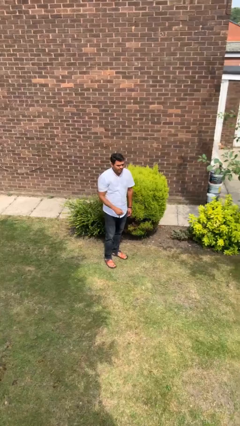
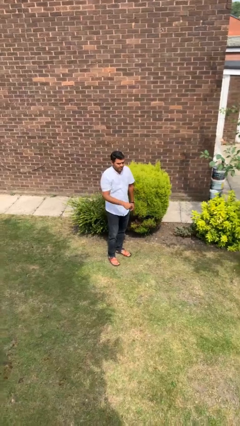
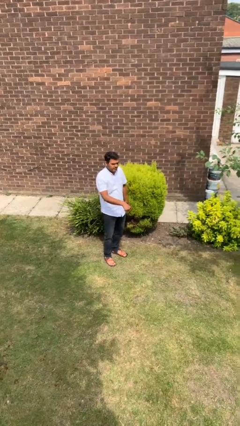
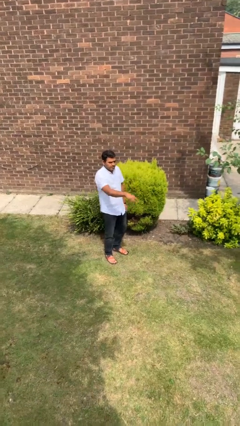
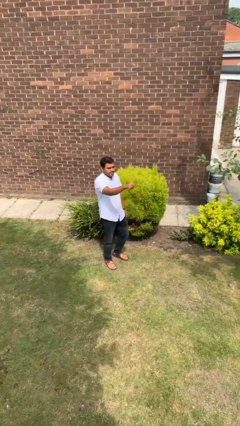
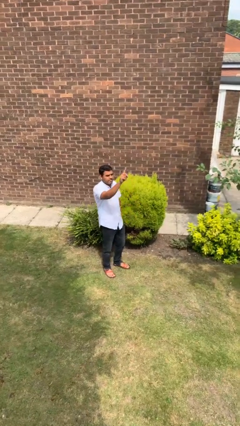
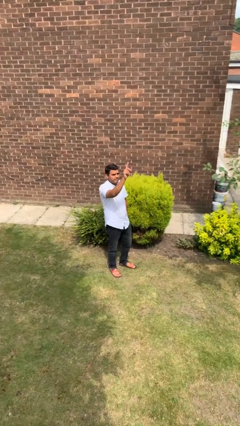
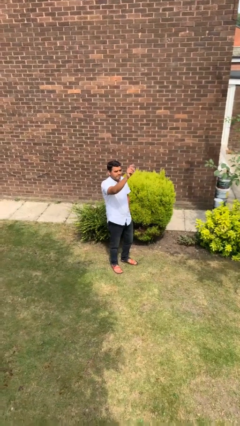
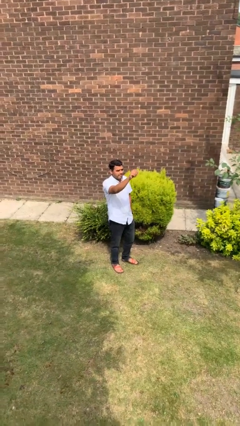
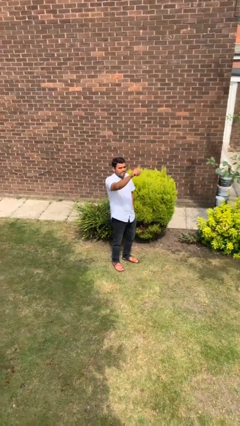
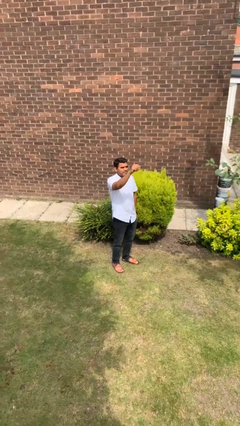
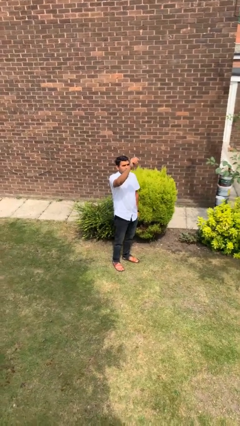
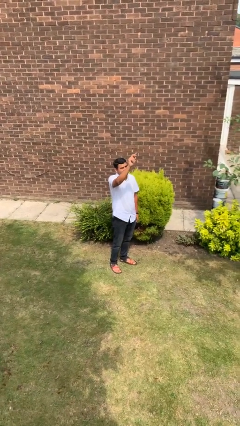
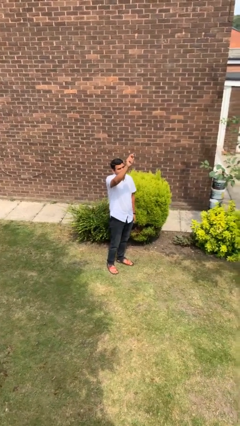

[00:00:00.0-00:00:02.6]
person gestures swipe up

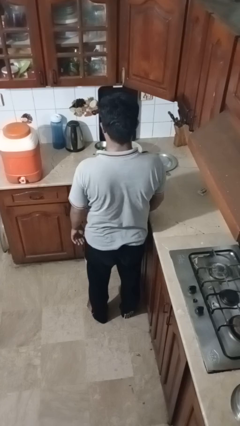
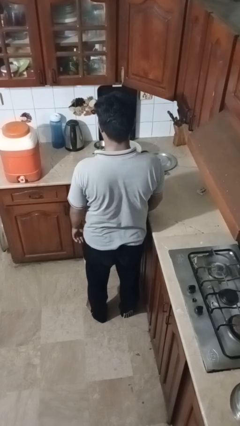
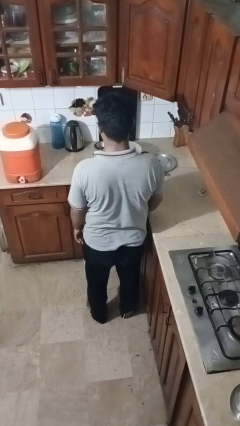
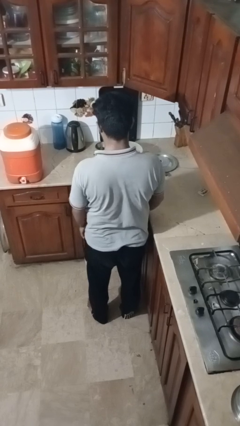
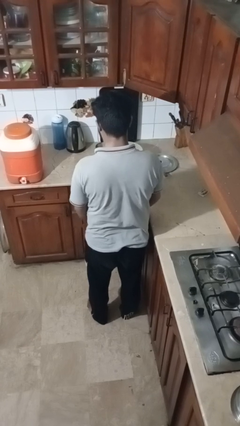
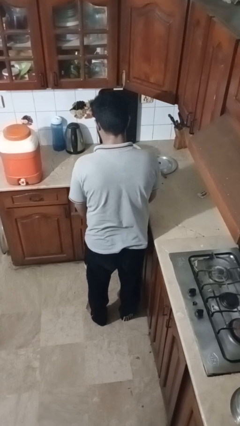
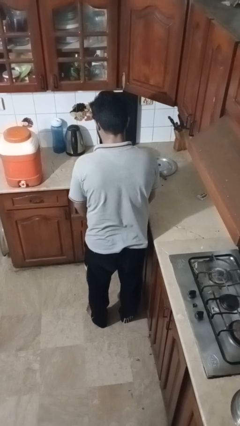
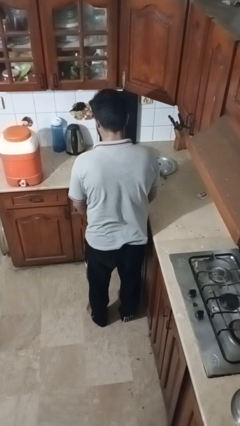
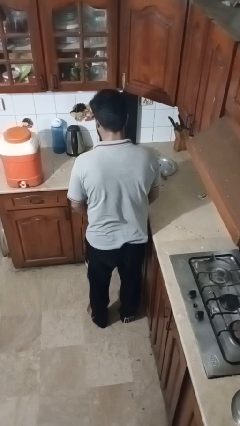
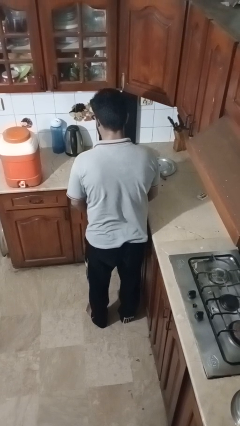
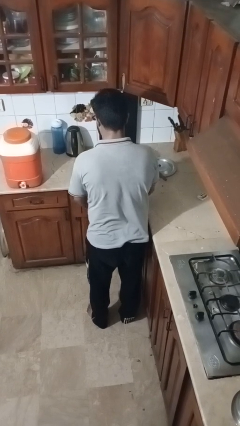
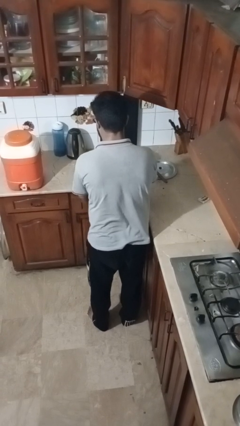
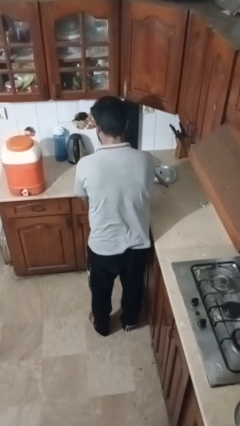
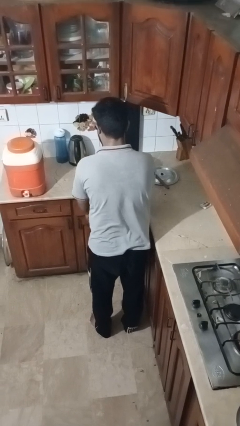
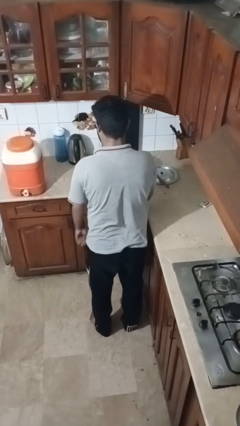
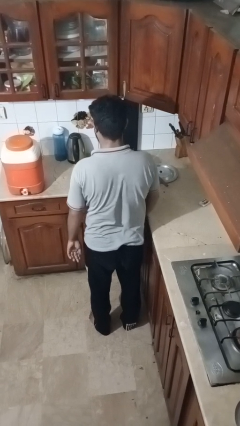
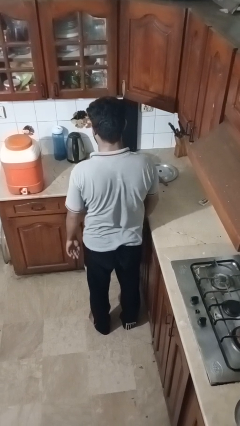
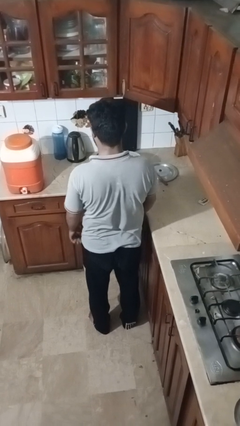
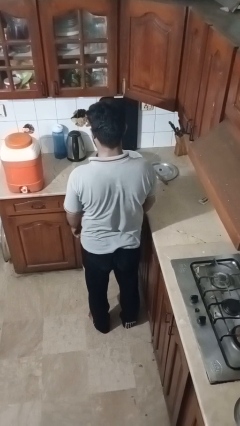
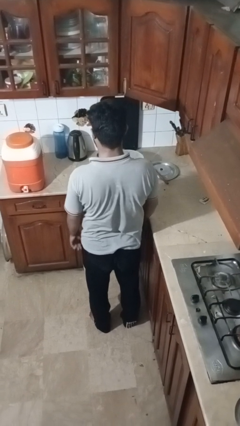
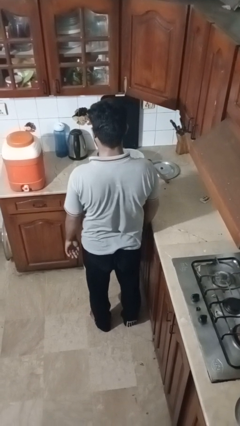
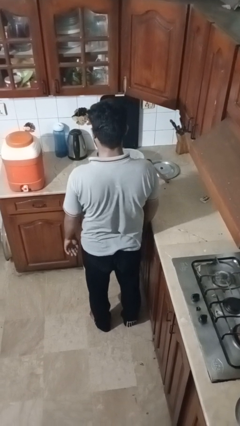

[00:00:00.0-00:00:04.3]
person closes kitchen drawer

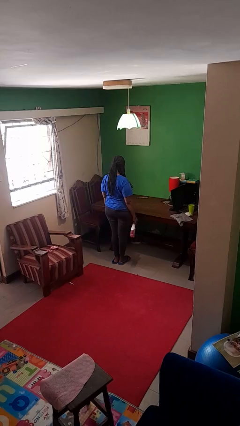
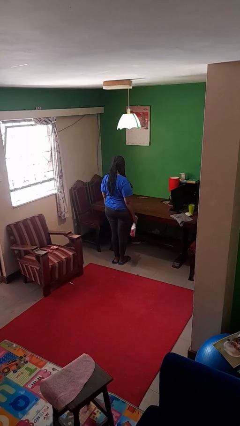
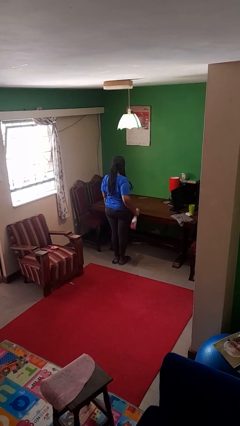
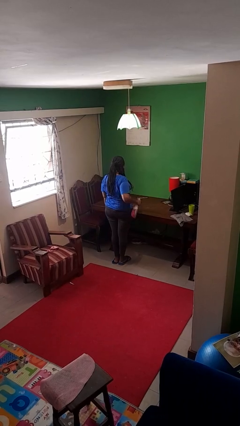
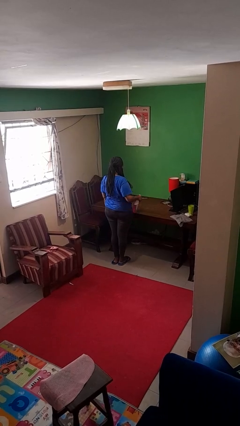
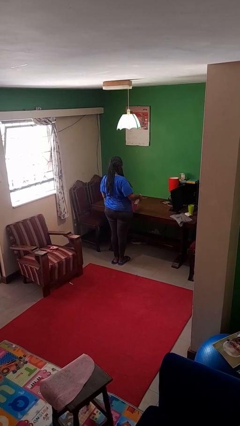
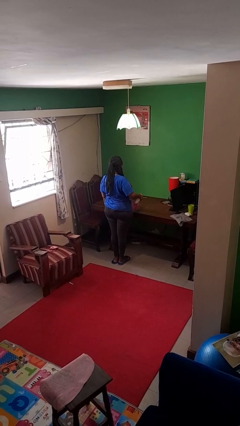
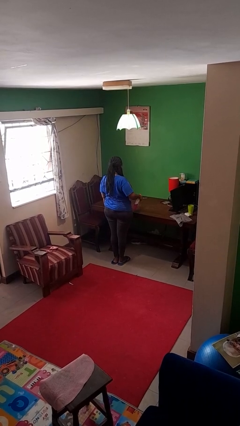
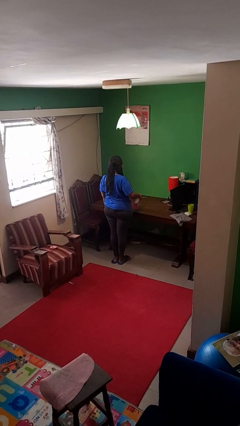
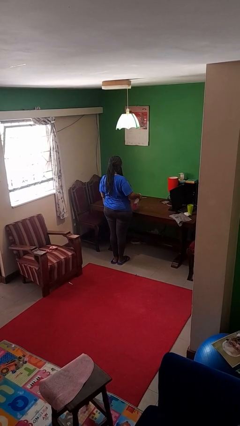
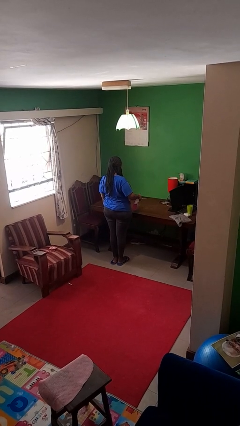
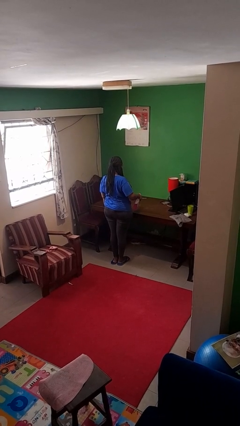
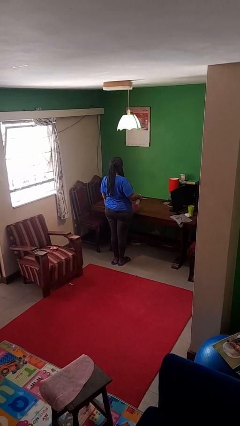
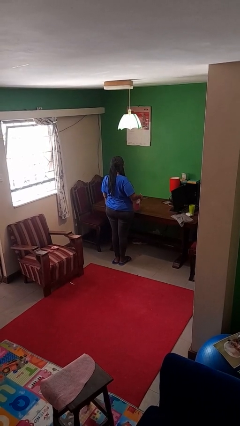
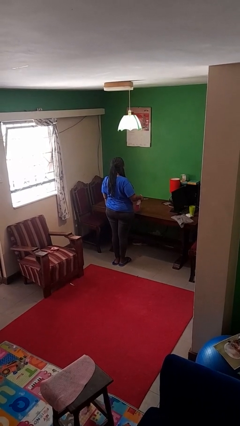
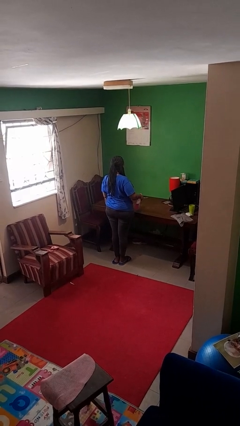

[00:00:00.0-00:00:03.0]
person sprays from bottle

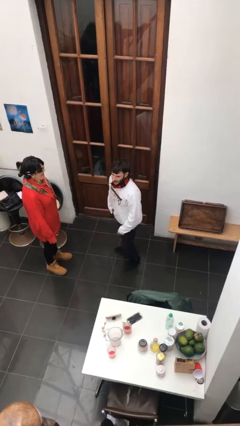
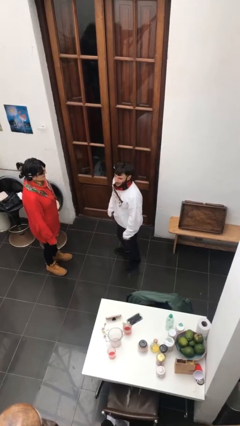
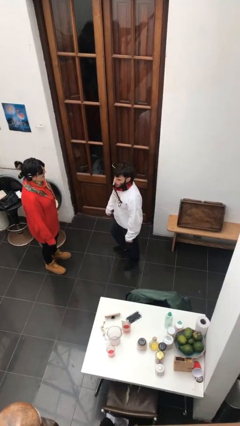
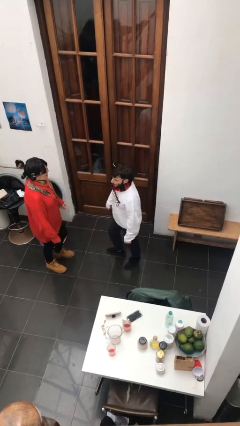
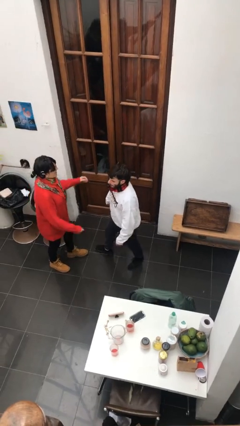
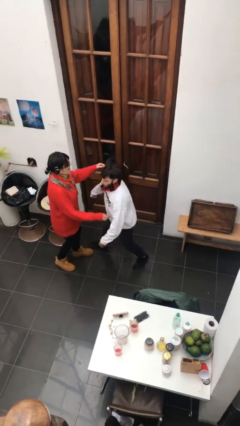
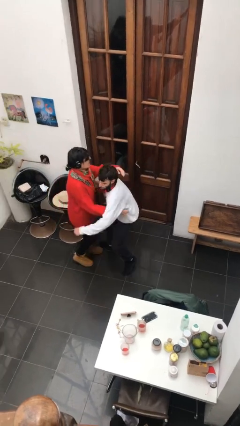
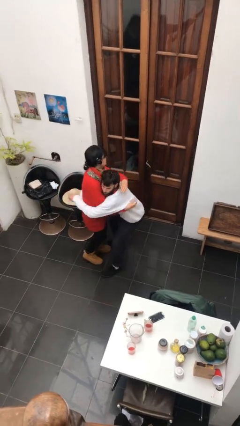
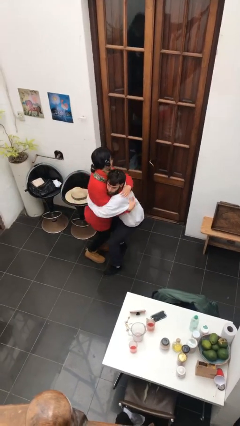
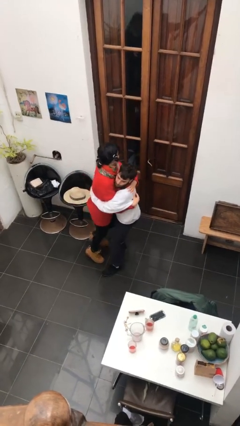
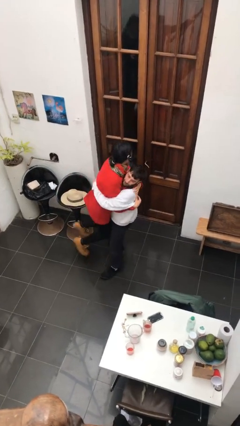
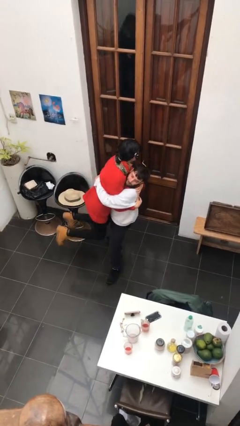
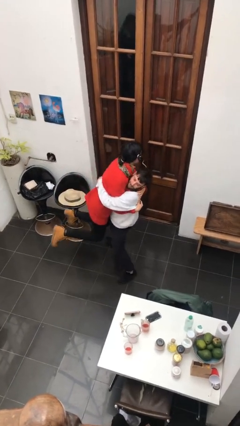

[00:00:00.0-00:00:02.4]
person picks up person

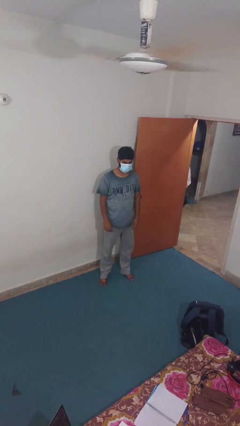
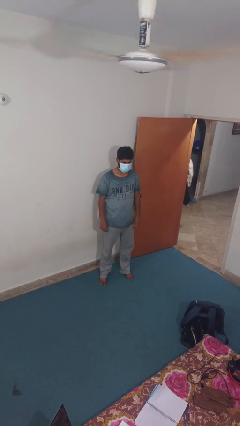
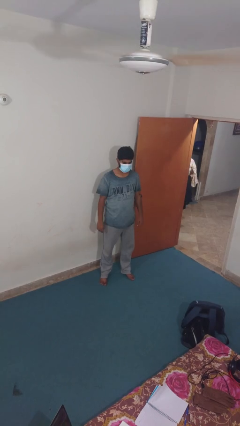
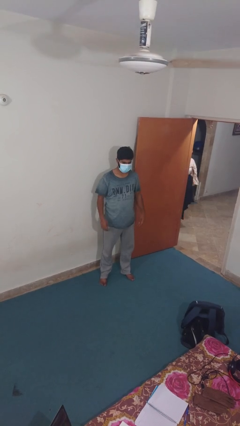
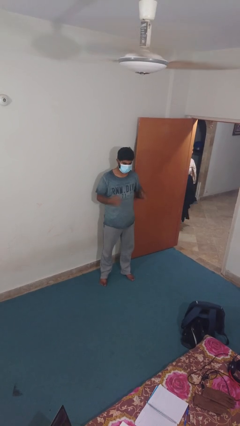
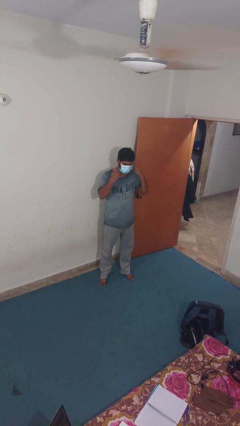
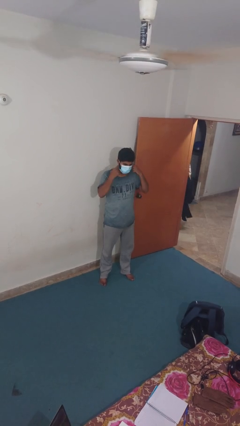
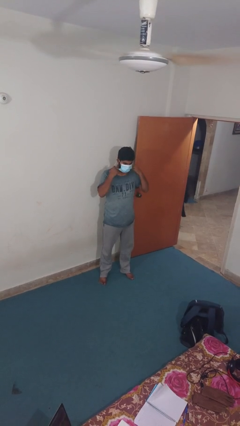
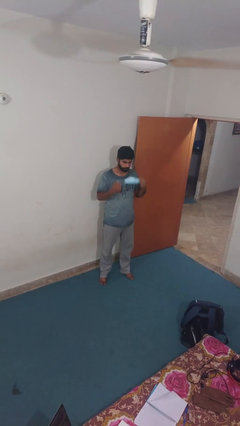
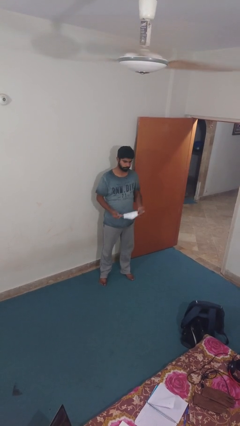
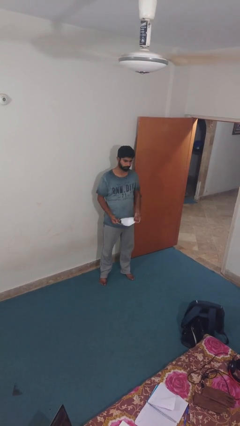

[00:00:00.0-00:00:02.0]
person takes off facemask

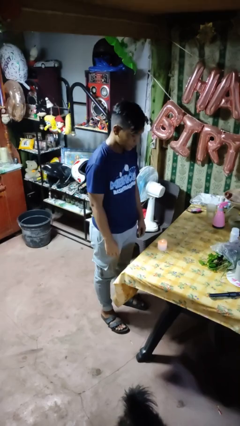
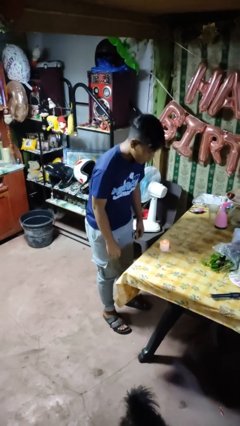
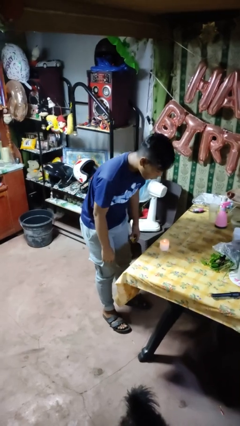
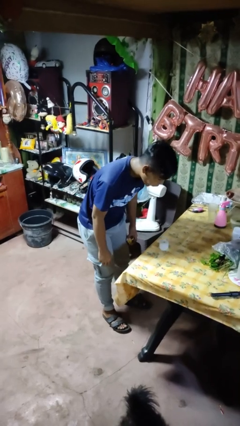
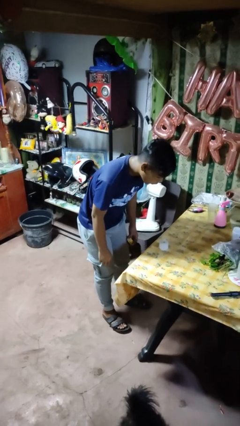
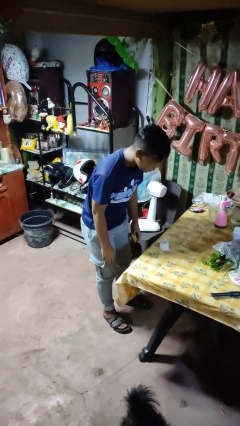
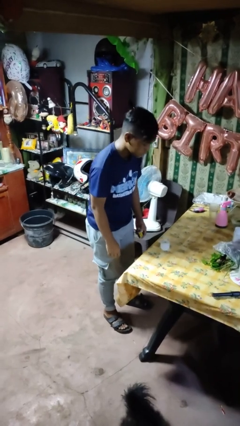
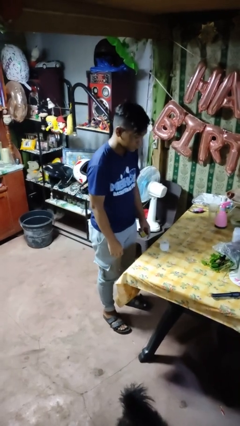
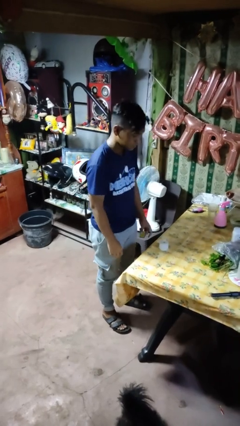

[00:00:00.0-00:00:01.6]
person extinguishes candle

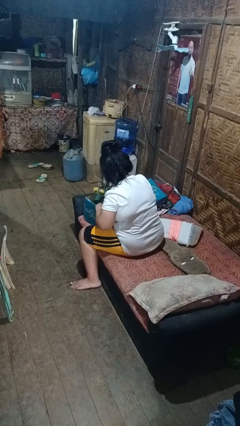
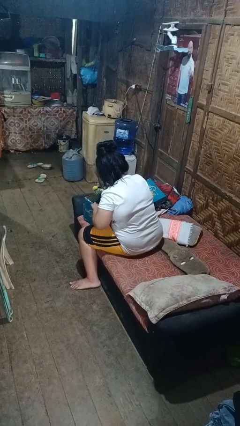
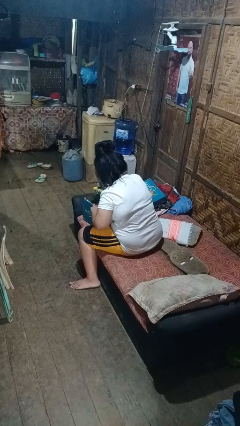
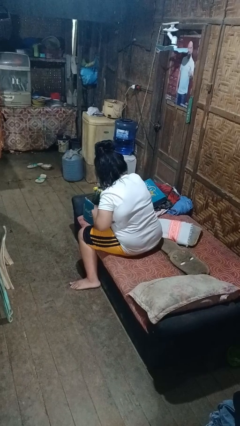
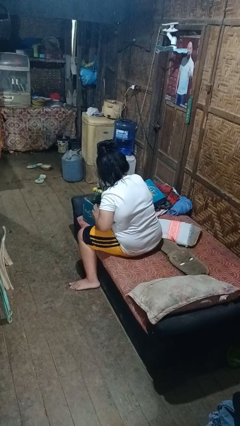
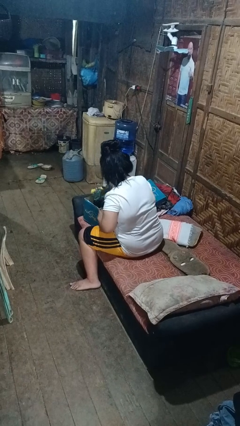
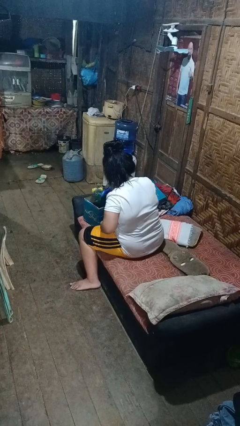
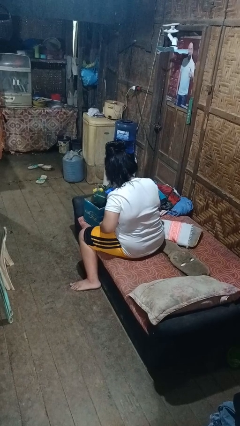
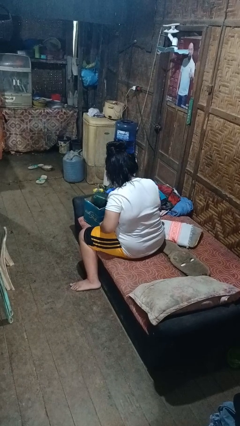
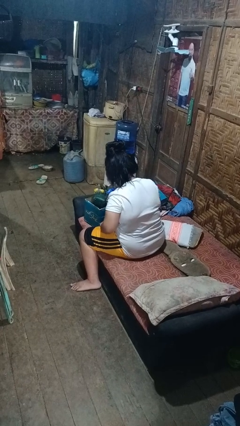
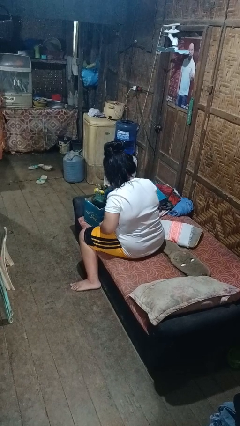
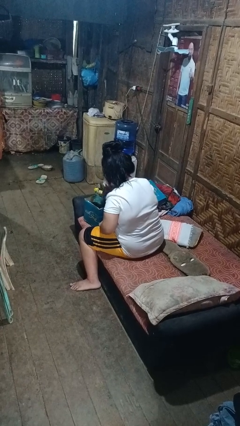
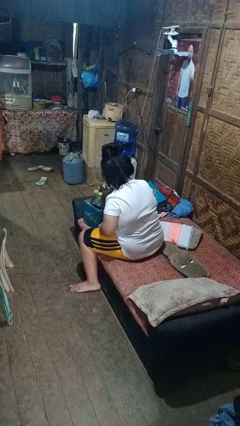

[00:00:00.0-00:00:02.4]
person searches in box
